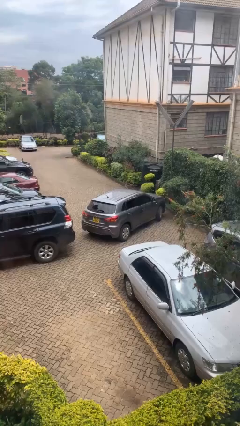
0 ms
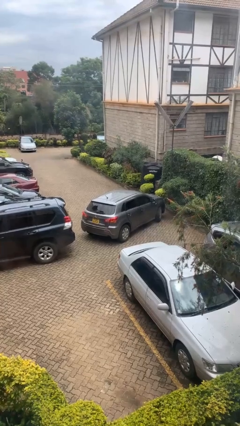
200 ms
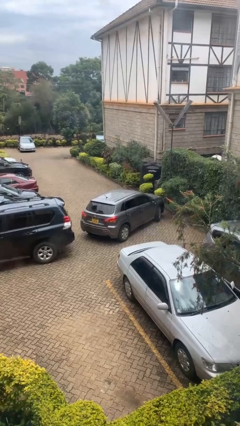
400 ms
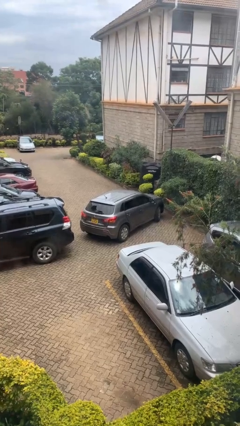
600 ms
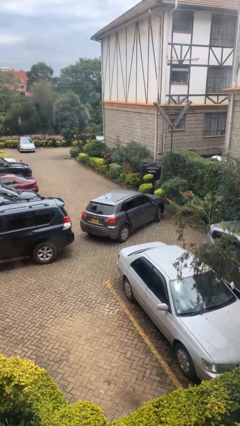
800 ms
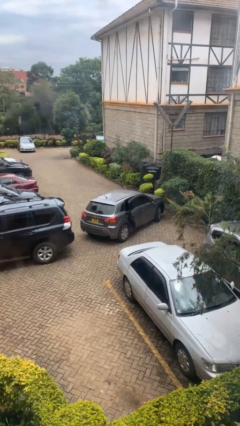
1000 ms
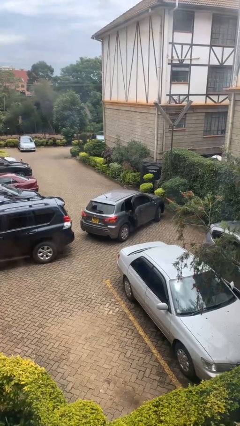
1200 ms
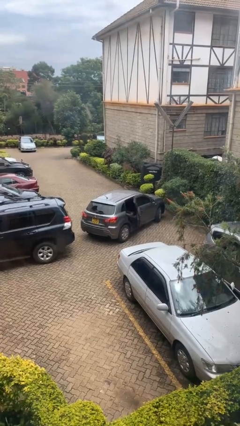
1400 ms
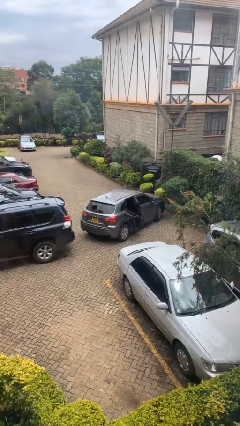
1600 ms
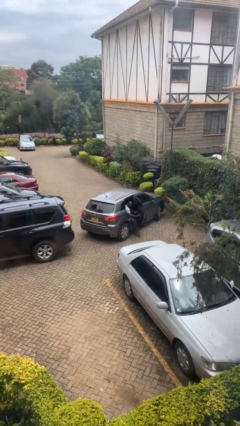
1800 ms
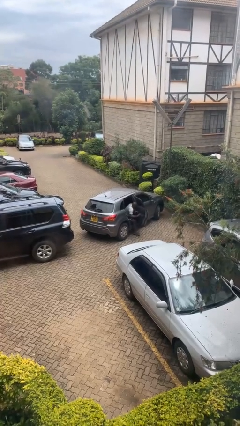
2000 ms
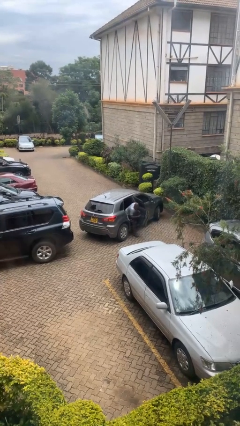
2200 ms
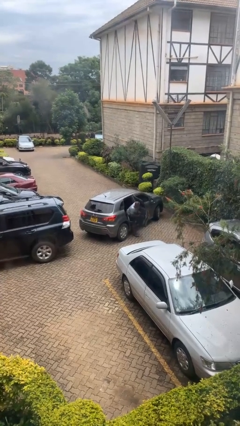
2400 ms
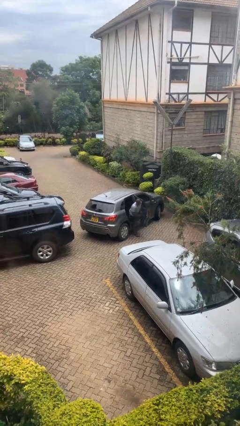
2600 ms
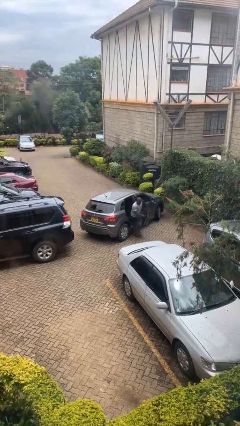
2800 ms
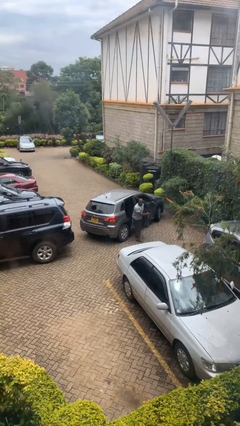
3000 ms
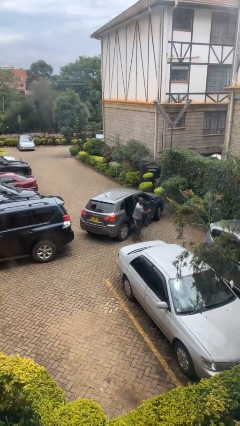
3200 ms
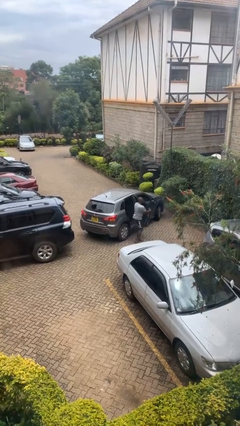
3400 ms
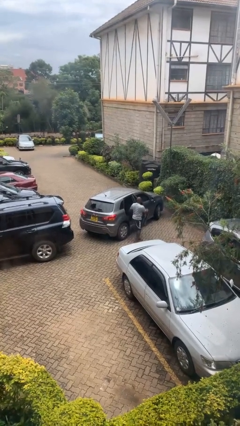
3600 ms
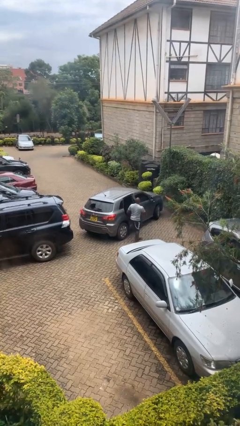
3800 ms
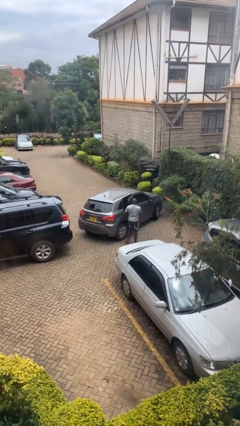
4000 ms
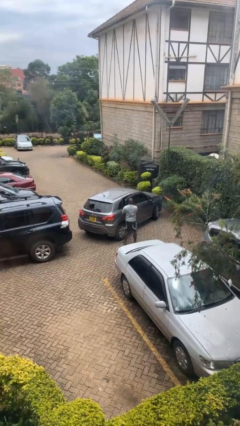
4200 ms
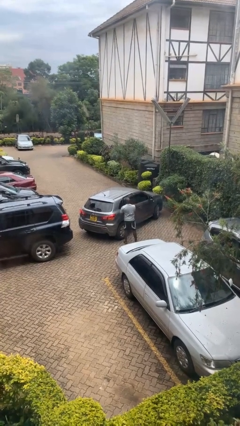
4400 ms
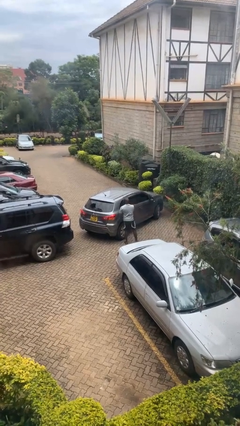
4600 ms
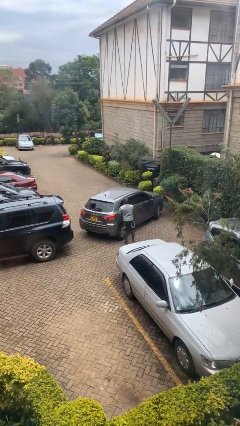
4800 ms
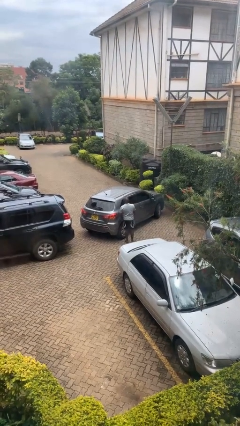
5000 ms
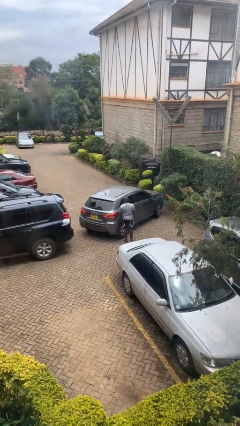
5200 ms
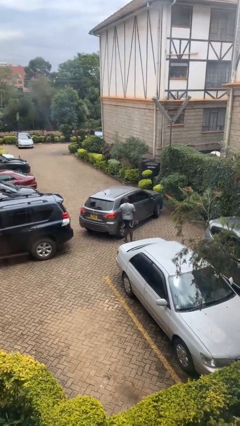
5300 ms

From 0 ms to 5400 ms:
car drops off person

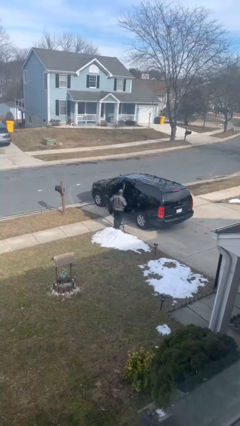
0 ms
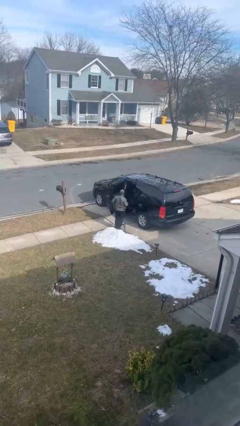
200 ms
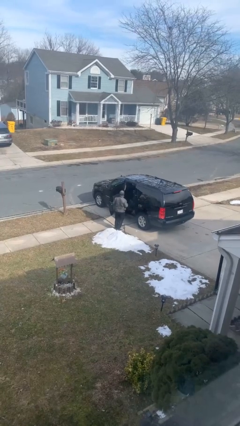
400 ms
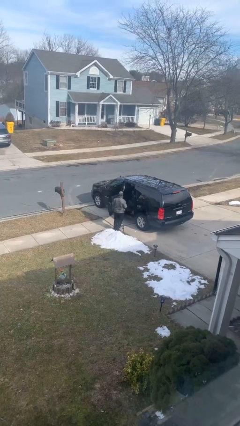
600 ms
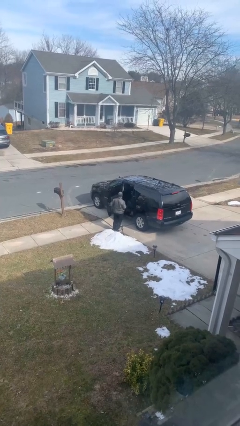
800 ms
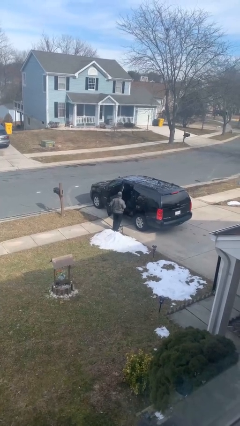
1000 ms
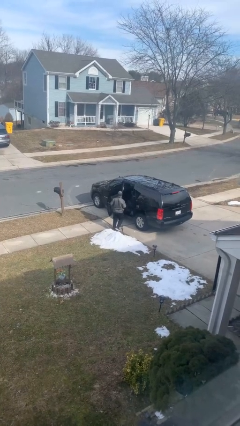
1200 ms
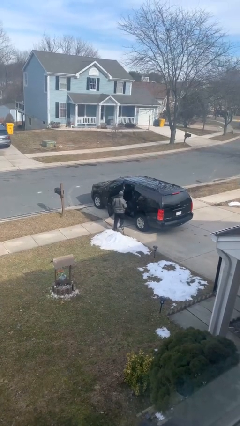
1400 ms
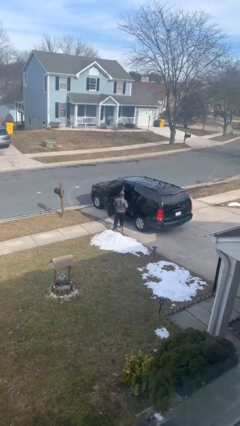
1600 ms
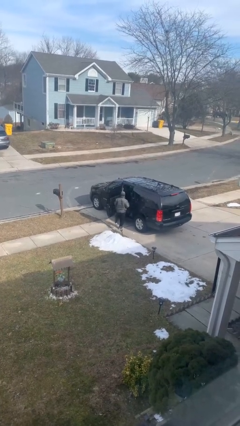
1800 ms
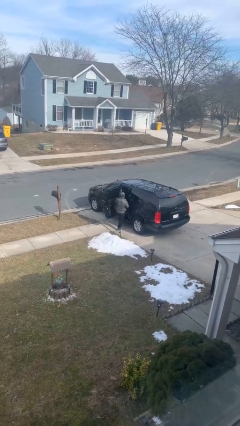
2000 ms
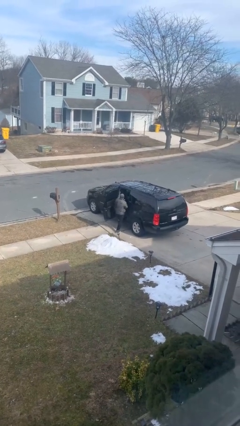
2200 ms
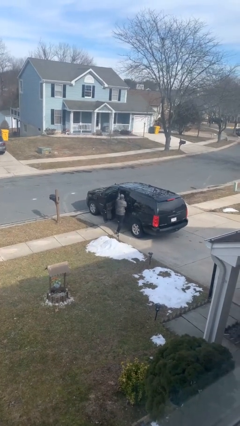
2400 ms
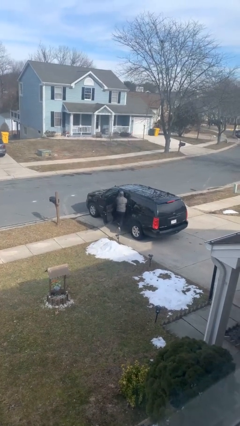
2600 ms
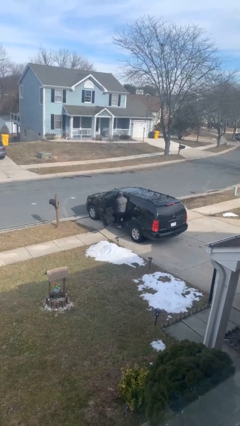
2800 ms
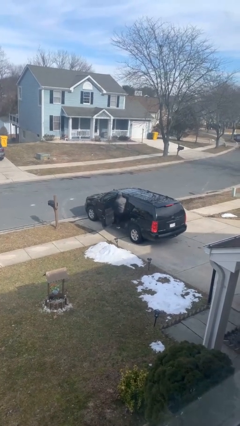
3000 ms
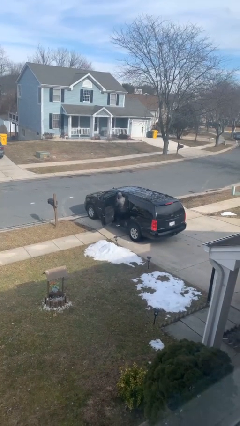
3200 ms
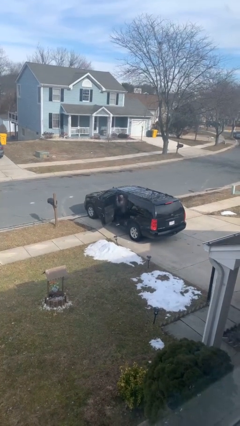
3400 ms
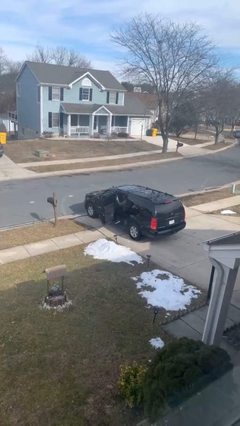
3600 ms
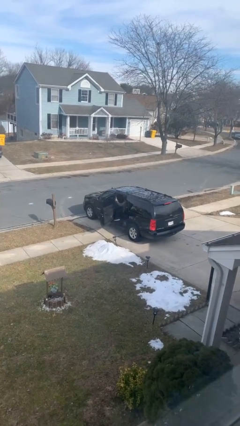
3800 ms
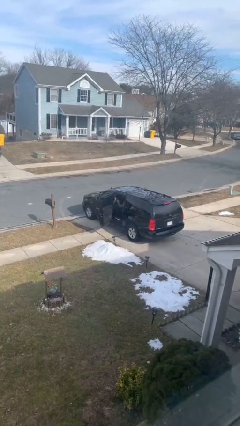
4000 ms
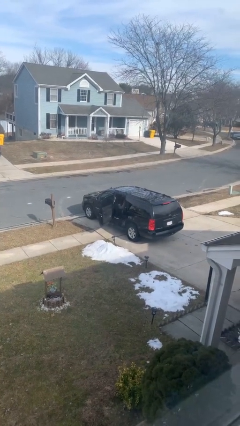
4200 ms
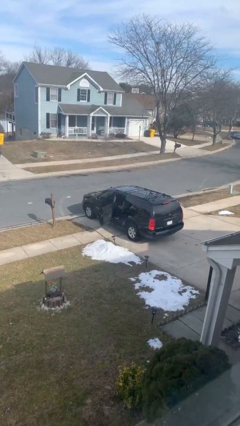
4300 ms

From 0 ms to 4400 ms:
person enters car

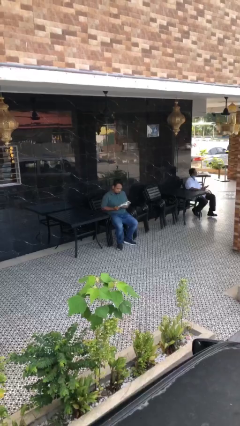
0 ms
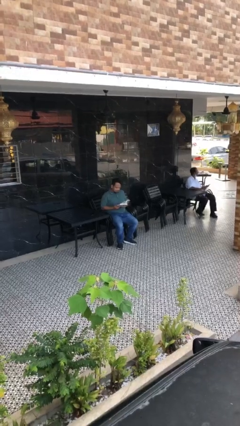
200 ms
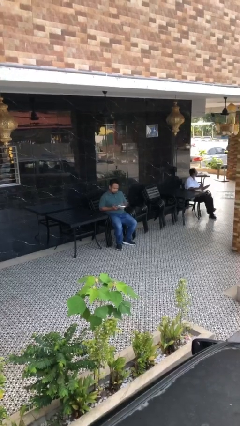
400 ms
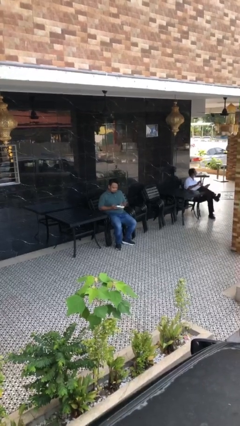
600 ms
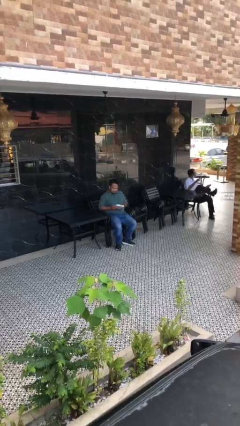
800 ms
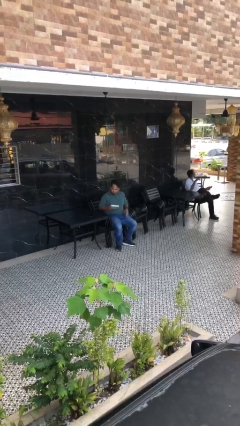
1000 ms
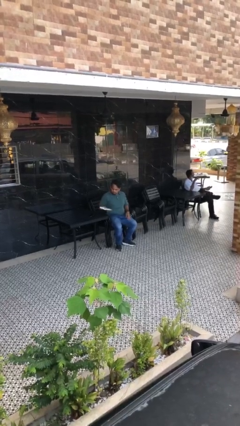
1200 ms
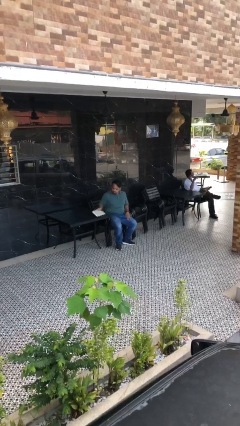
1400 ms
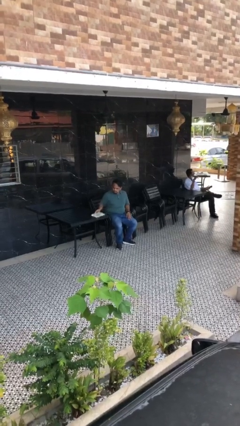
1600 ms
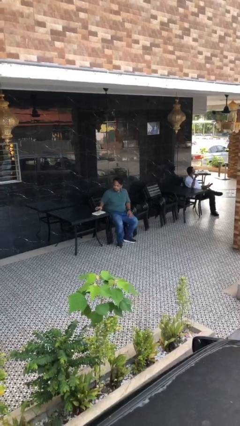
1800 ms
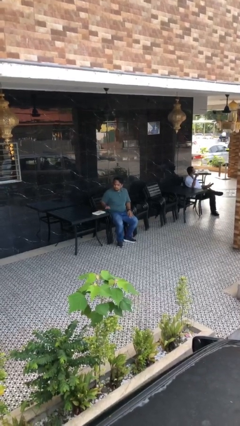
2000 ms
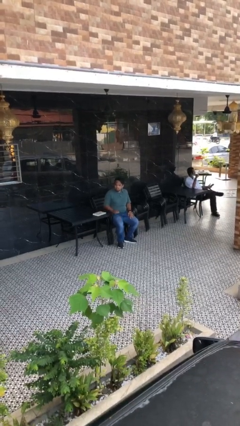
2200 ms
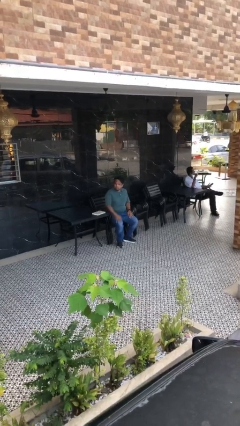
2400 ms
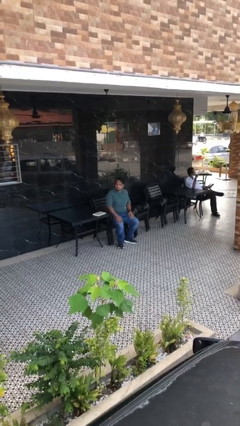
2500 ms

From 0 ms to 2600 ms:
person puts down object on table

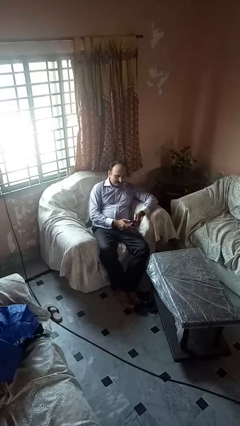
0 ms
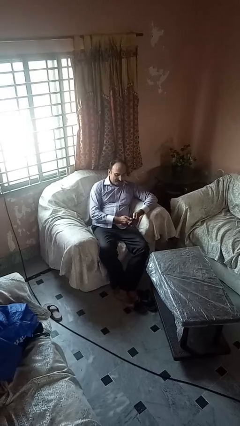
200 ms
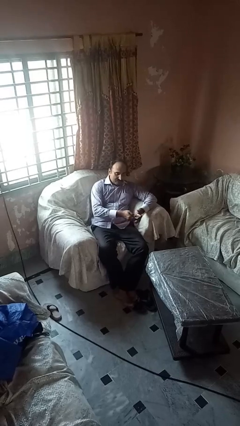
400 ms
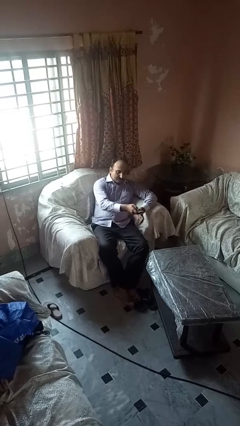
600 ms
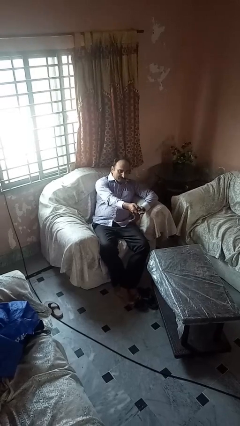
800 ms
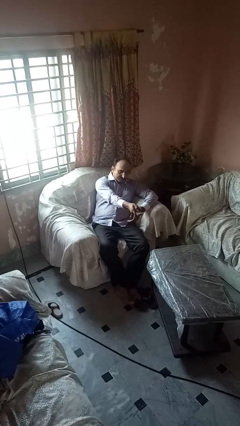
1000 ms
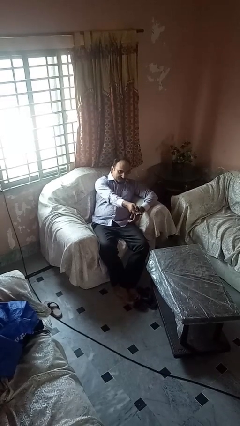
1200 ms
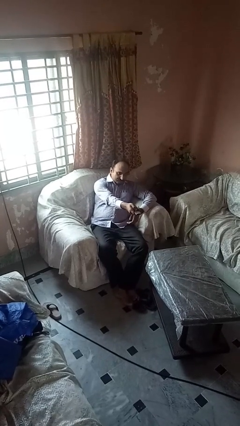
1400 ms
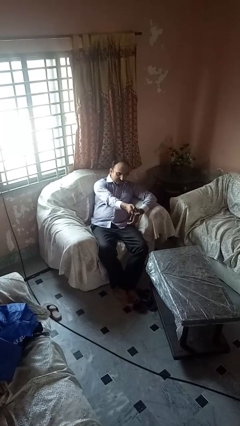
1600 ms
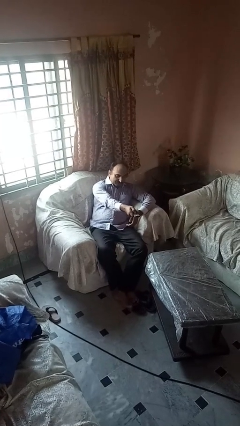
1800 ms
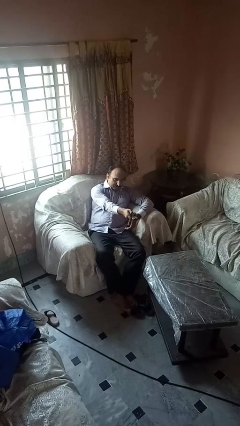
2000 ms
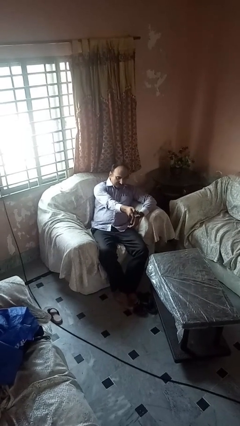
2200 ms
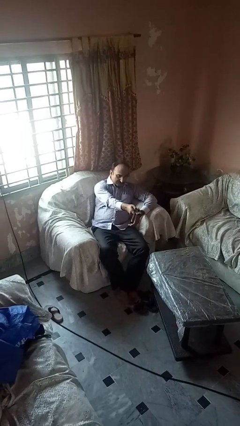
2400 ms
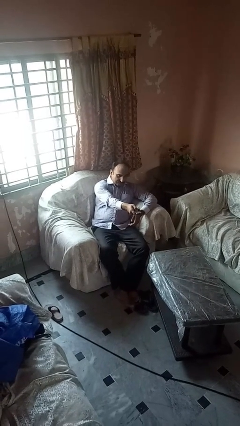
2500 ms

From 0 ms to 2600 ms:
person uses television remote

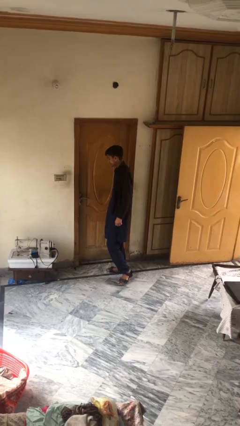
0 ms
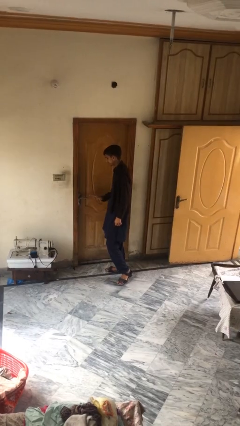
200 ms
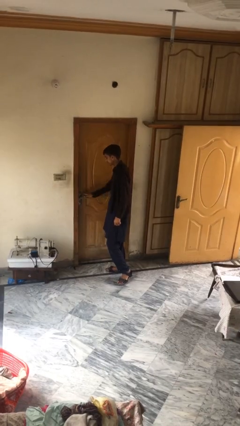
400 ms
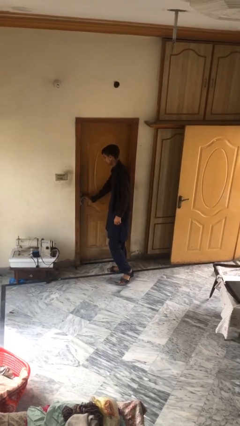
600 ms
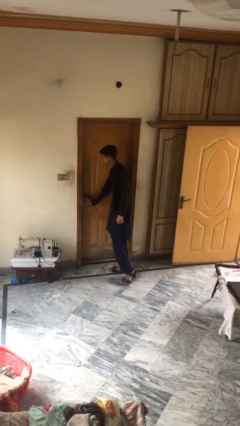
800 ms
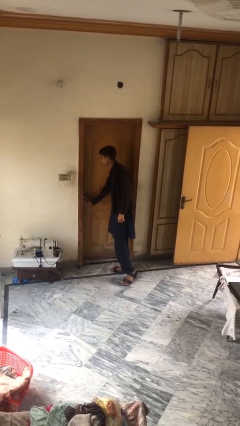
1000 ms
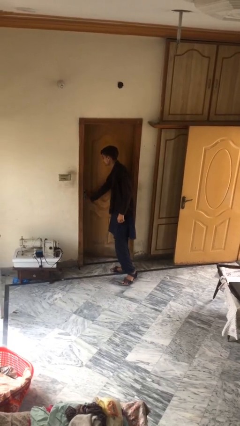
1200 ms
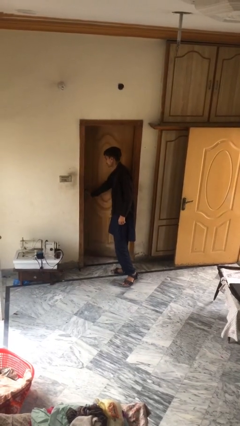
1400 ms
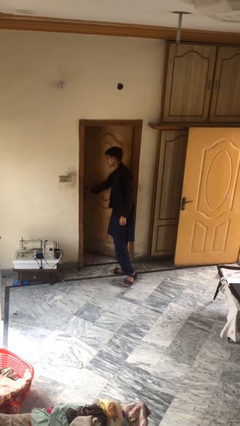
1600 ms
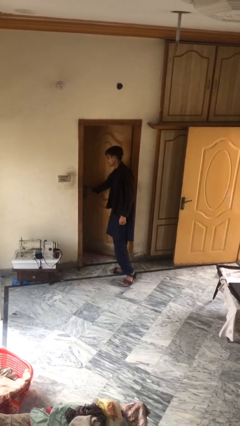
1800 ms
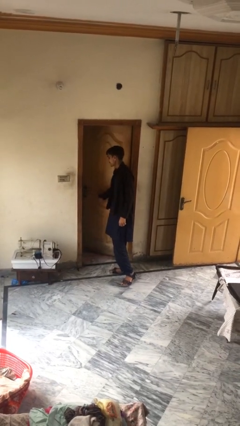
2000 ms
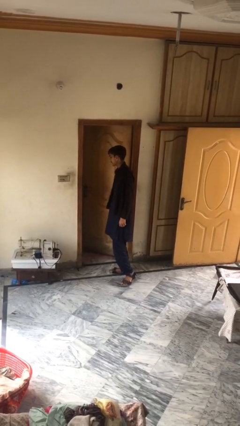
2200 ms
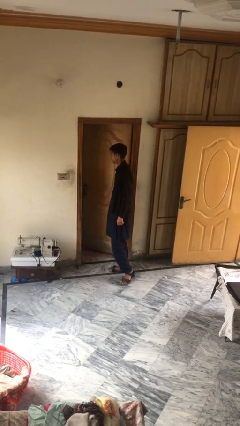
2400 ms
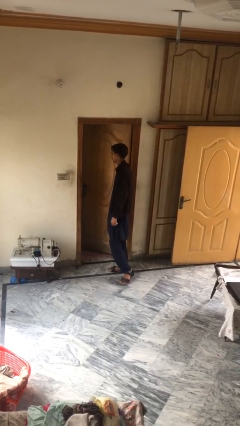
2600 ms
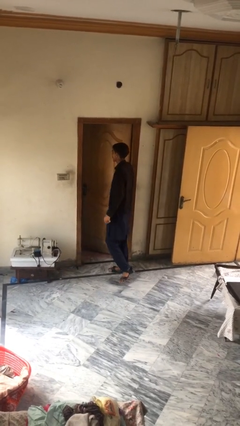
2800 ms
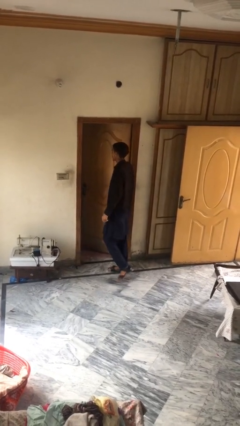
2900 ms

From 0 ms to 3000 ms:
person opens facility door
